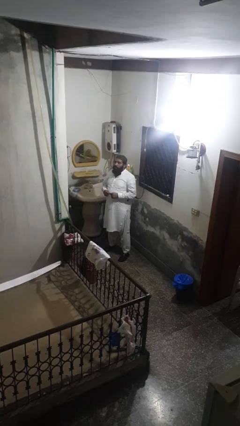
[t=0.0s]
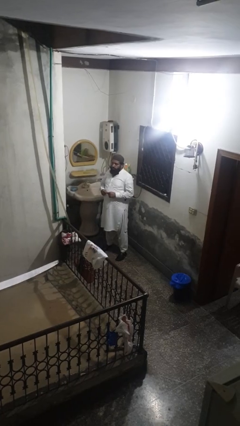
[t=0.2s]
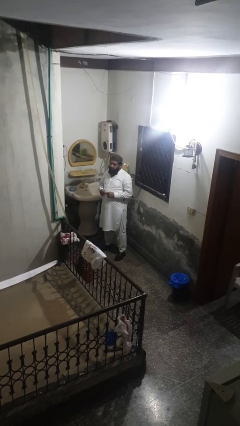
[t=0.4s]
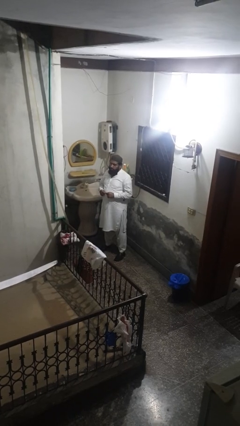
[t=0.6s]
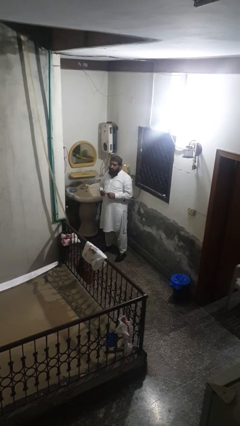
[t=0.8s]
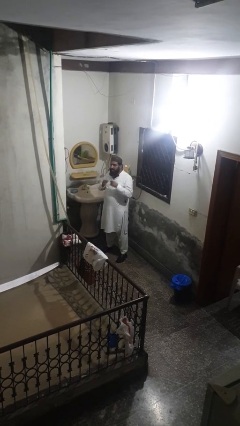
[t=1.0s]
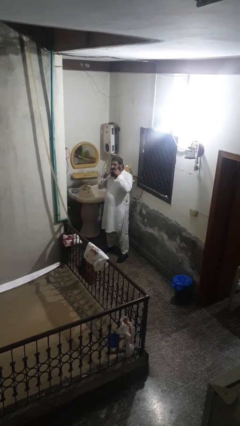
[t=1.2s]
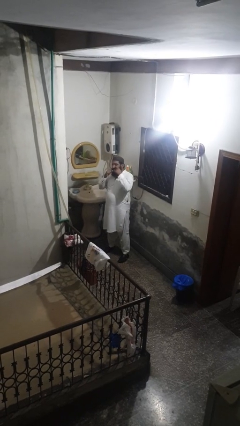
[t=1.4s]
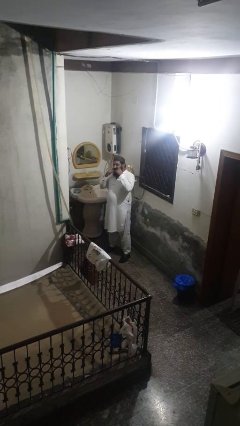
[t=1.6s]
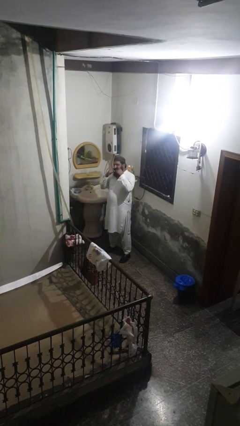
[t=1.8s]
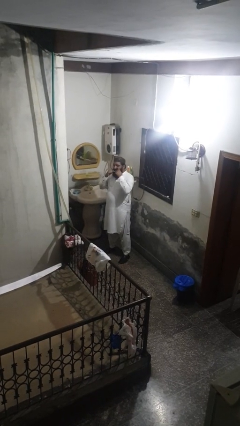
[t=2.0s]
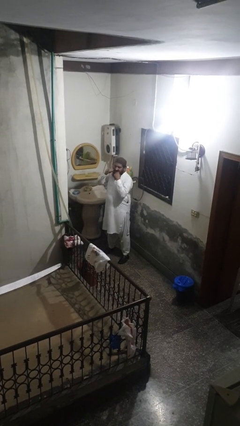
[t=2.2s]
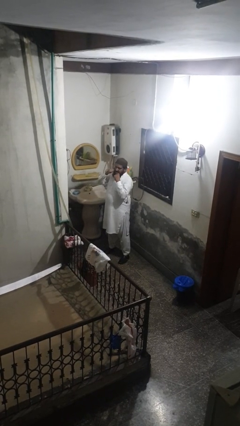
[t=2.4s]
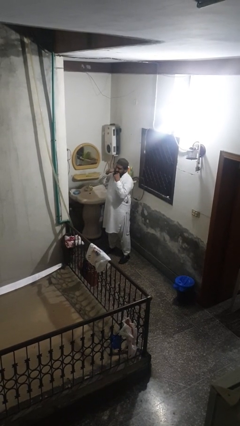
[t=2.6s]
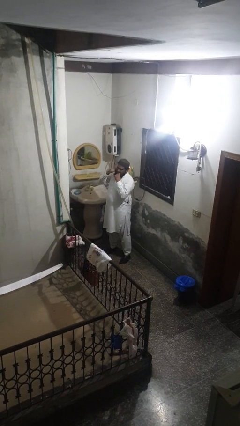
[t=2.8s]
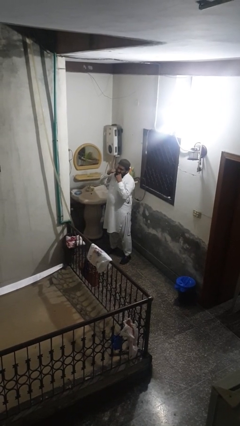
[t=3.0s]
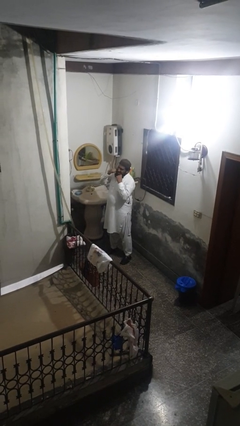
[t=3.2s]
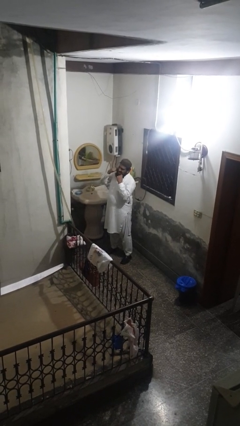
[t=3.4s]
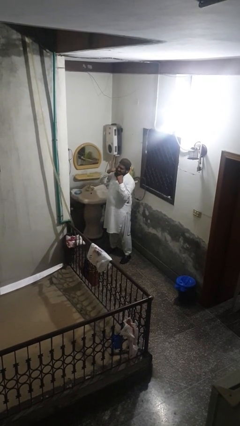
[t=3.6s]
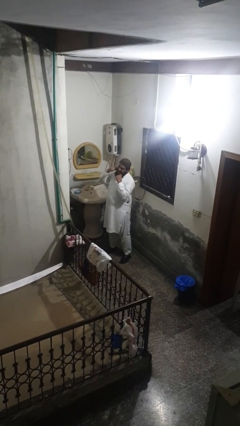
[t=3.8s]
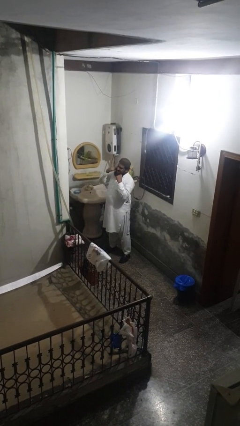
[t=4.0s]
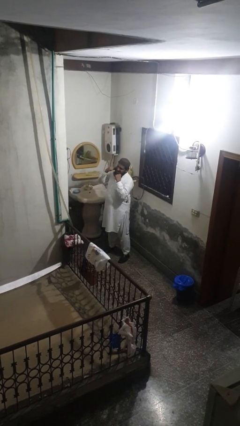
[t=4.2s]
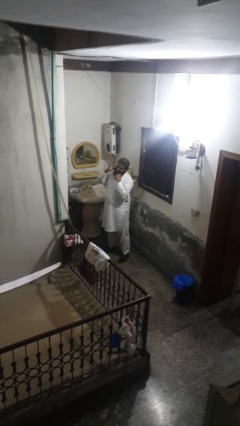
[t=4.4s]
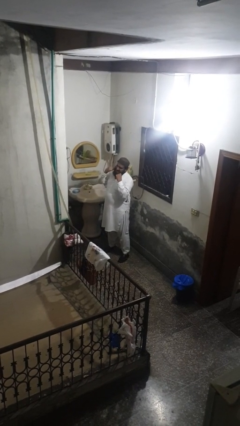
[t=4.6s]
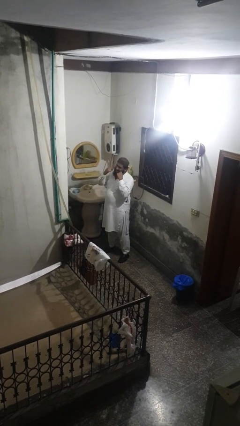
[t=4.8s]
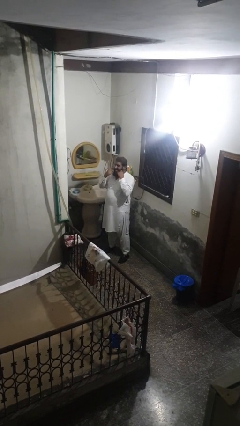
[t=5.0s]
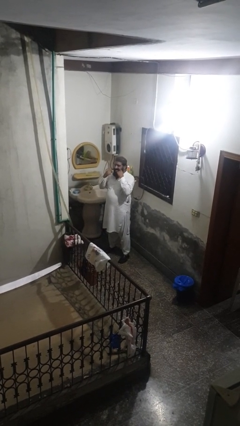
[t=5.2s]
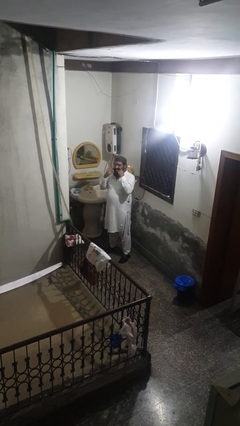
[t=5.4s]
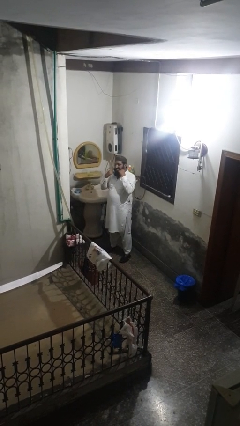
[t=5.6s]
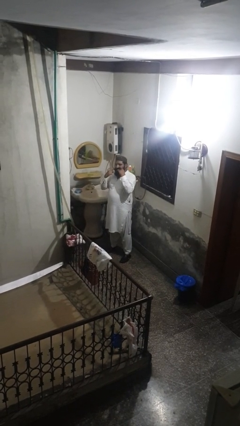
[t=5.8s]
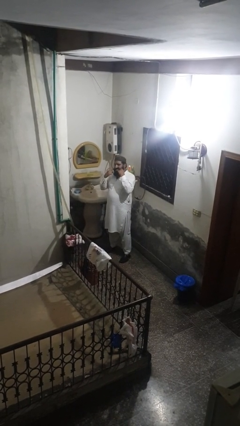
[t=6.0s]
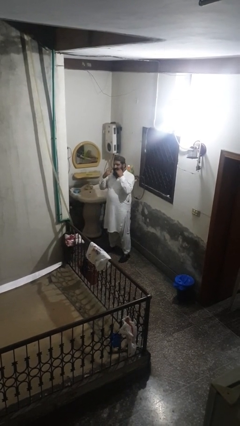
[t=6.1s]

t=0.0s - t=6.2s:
person flosses

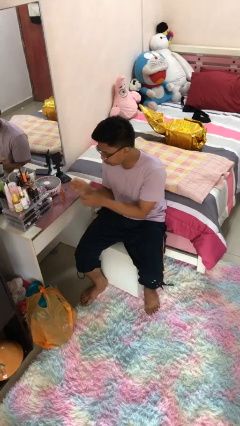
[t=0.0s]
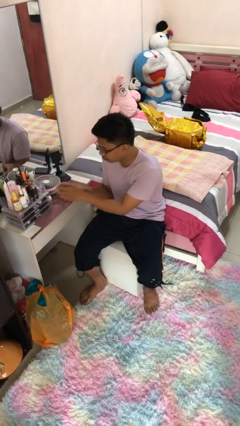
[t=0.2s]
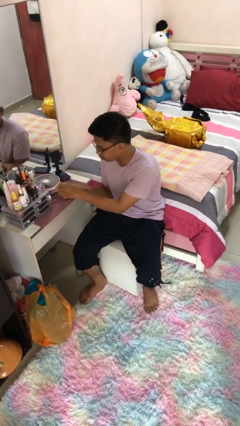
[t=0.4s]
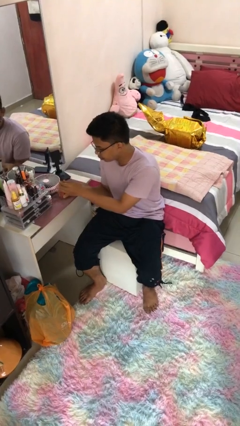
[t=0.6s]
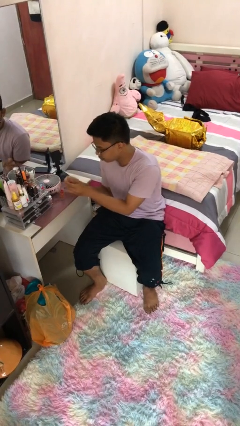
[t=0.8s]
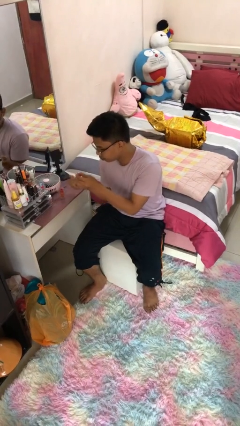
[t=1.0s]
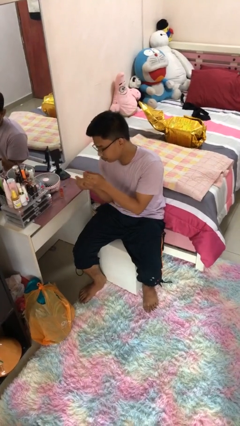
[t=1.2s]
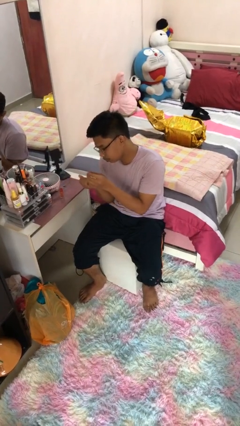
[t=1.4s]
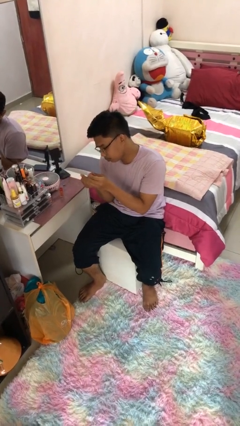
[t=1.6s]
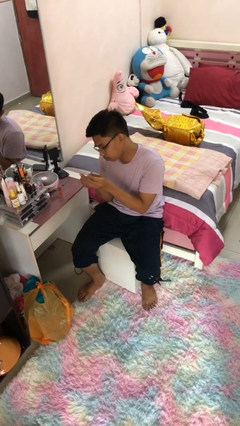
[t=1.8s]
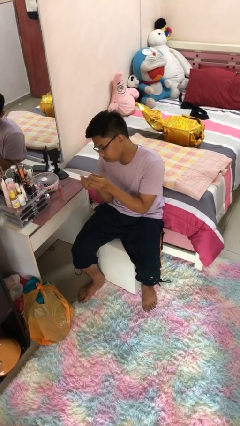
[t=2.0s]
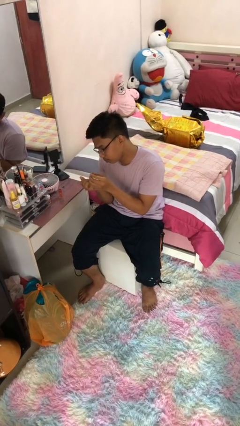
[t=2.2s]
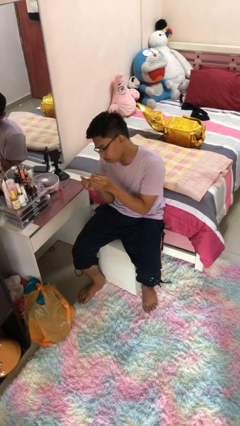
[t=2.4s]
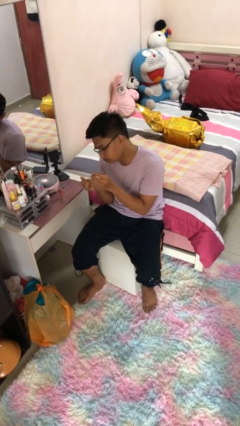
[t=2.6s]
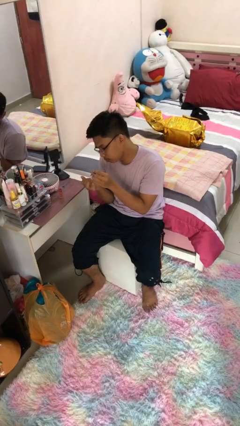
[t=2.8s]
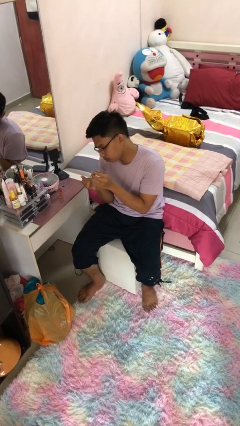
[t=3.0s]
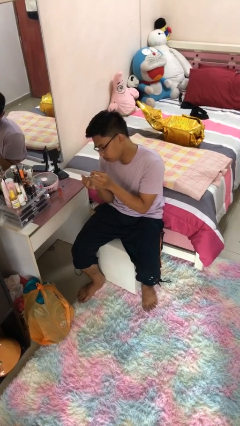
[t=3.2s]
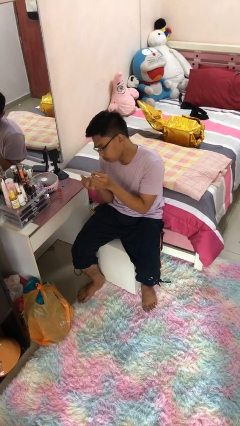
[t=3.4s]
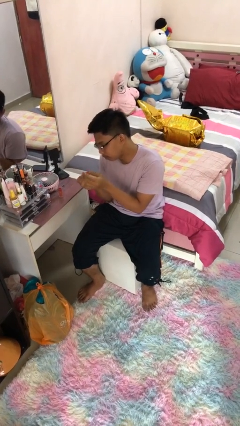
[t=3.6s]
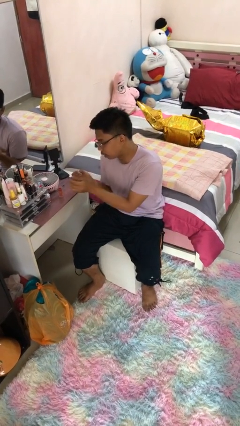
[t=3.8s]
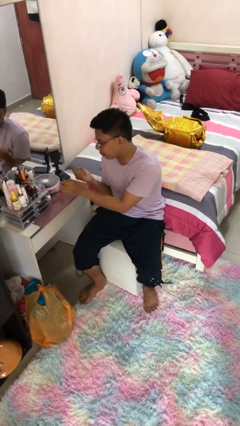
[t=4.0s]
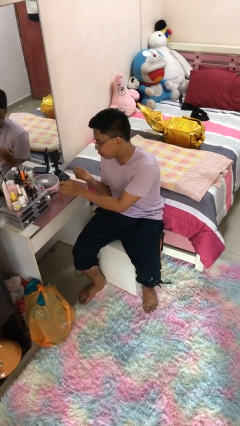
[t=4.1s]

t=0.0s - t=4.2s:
person paints fingernails

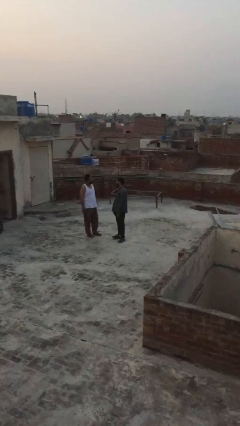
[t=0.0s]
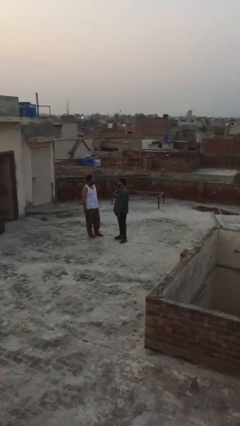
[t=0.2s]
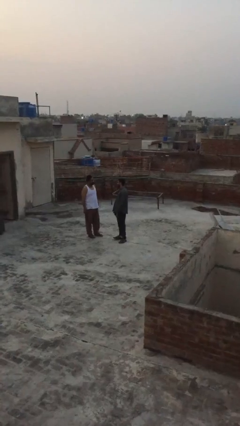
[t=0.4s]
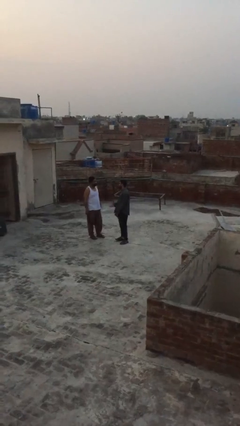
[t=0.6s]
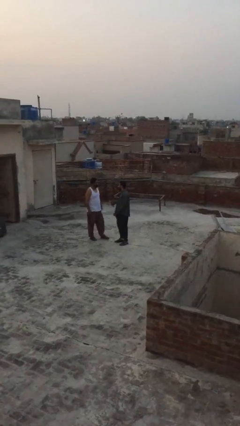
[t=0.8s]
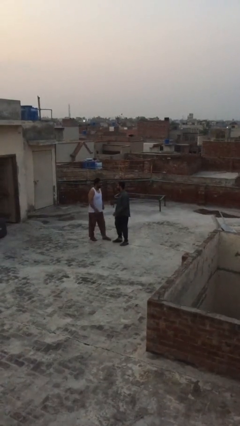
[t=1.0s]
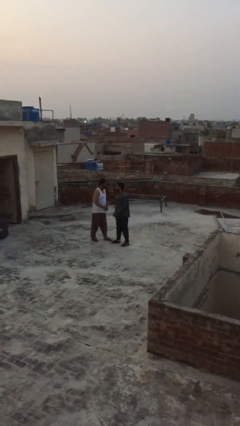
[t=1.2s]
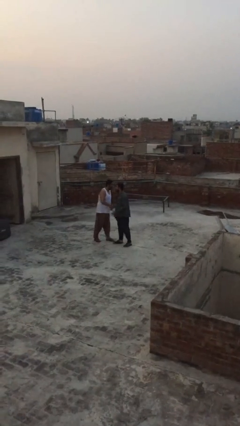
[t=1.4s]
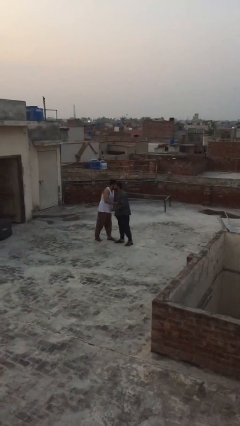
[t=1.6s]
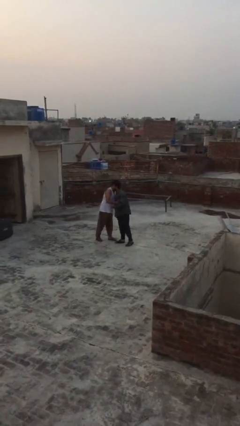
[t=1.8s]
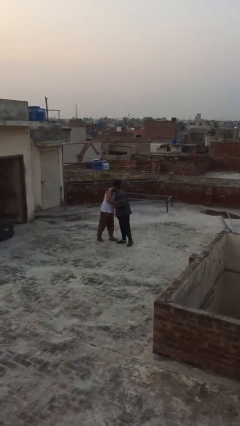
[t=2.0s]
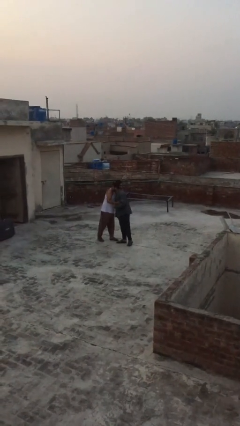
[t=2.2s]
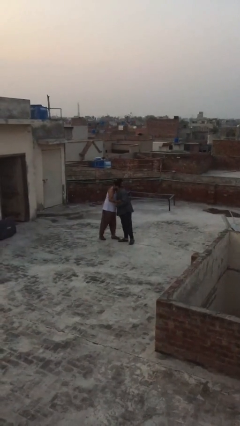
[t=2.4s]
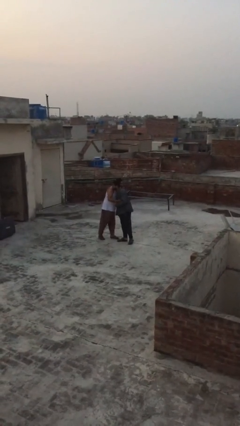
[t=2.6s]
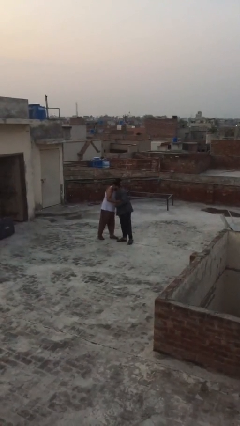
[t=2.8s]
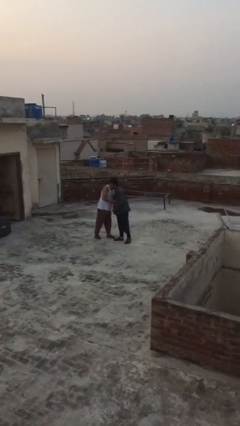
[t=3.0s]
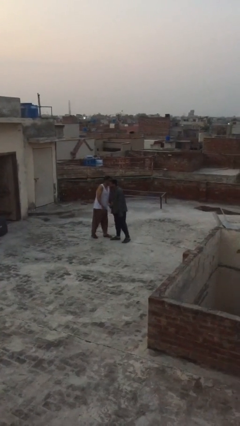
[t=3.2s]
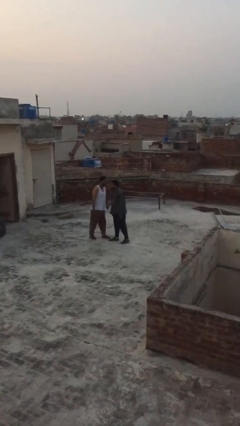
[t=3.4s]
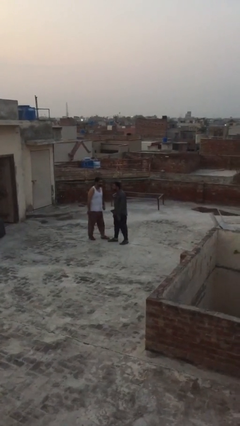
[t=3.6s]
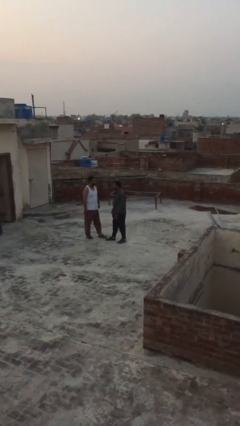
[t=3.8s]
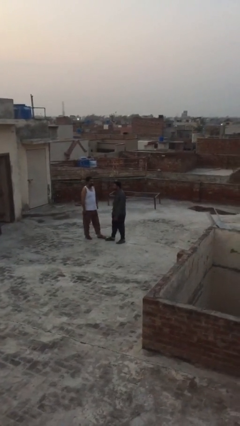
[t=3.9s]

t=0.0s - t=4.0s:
person embraces person

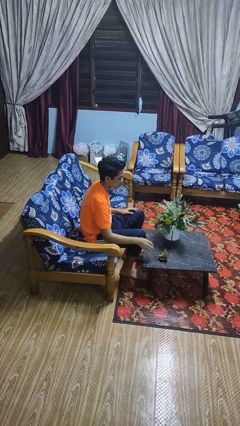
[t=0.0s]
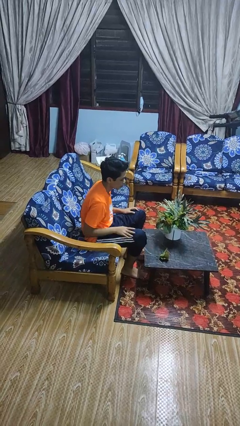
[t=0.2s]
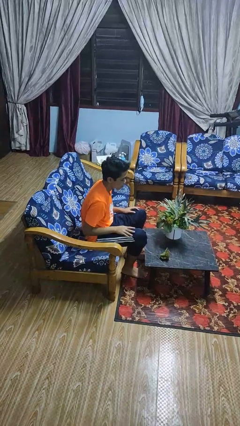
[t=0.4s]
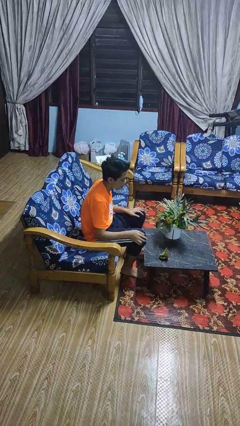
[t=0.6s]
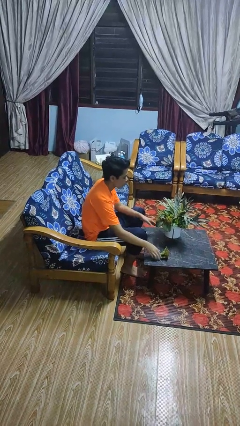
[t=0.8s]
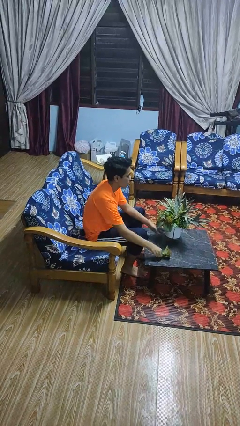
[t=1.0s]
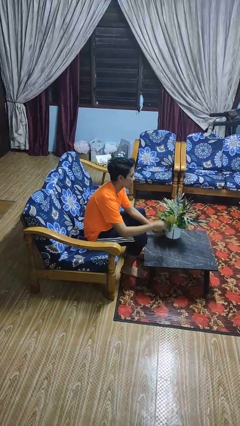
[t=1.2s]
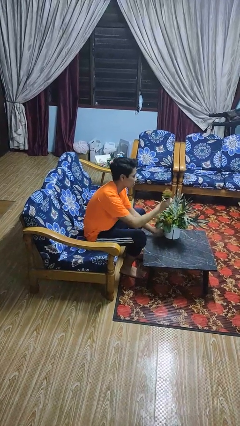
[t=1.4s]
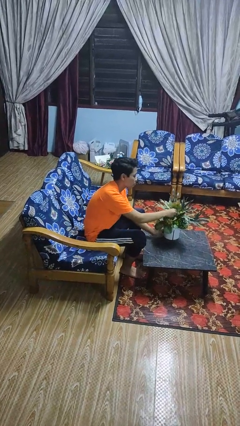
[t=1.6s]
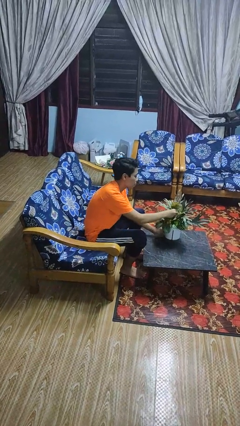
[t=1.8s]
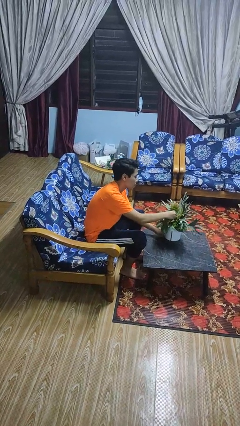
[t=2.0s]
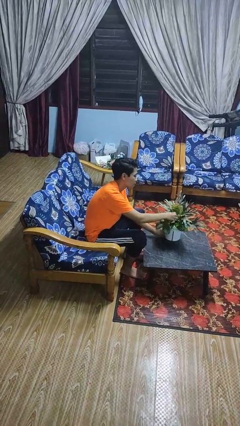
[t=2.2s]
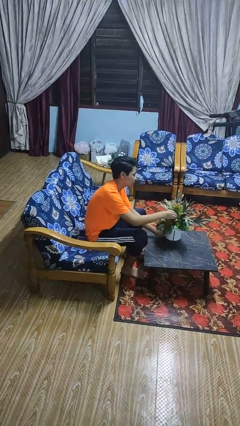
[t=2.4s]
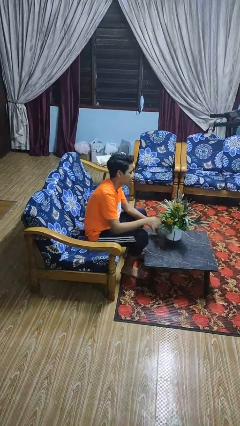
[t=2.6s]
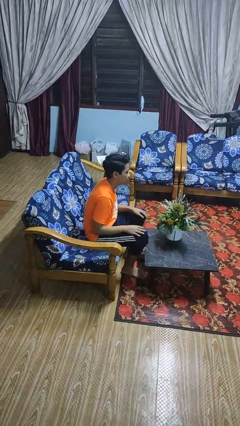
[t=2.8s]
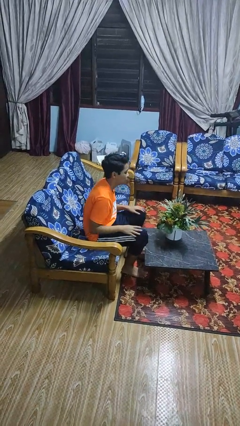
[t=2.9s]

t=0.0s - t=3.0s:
person arranges flowers in vase

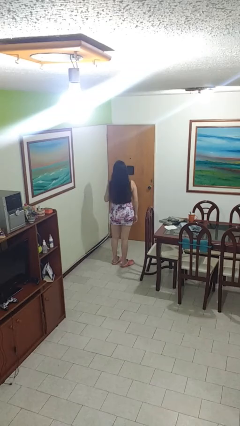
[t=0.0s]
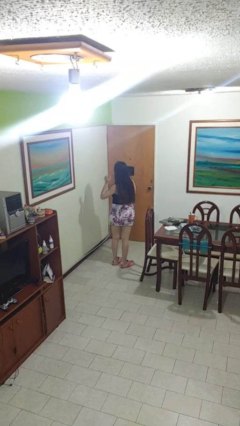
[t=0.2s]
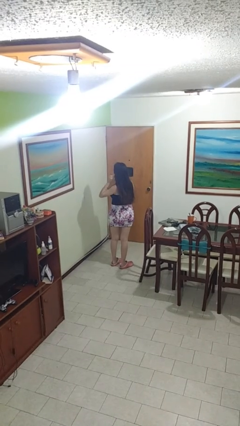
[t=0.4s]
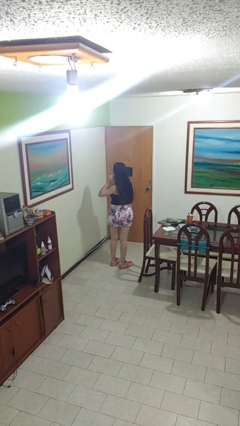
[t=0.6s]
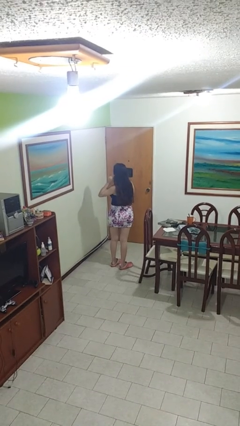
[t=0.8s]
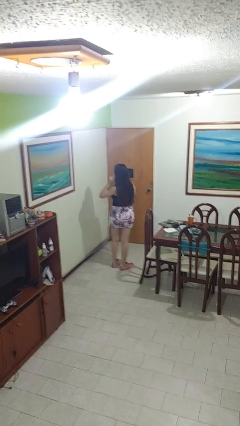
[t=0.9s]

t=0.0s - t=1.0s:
person gestures listen closely
